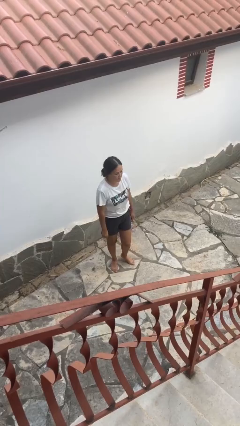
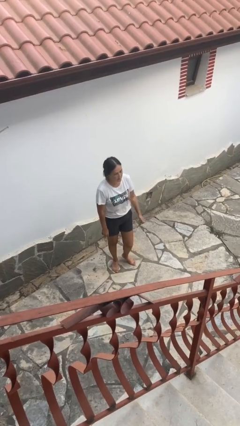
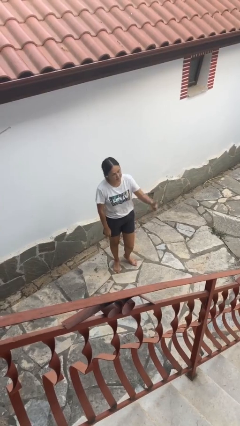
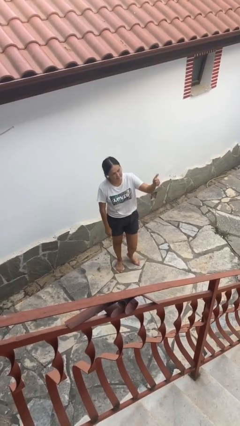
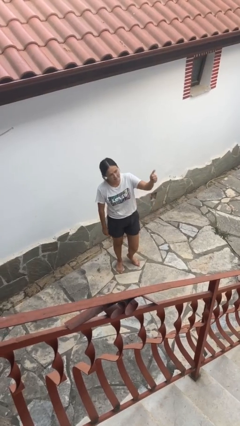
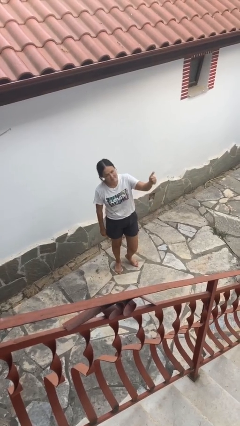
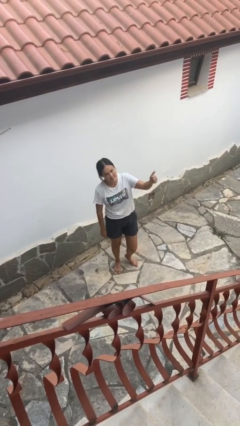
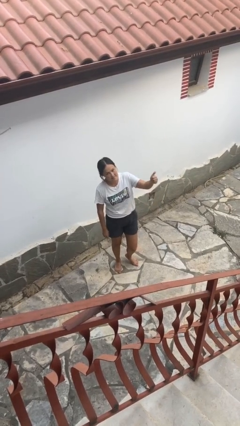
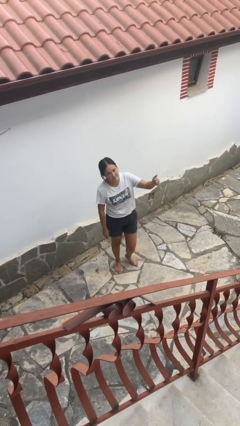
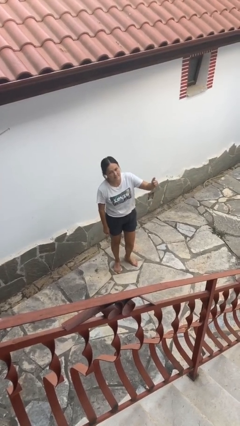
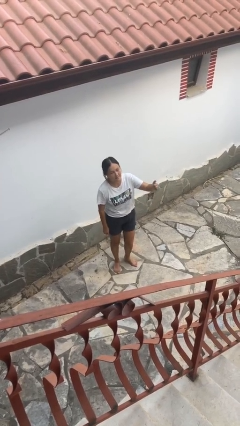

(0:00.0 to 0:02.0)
person gestures thumbs up

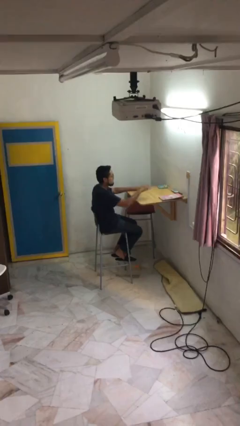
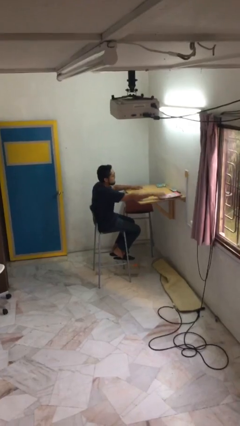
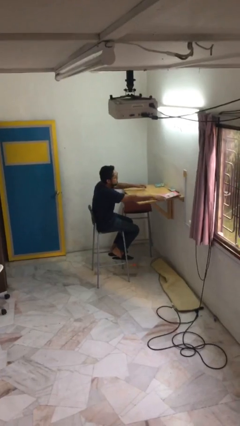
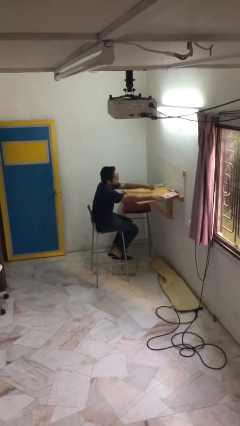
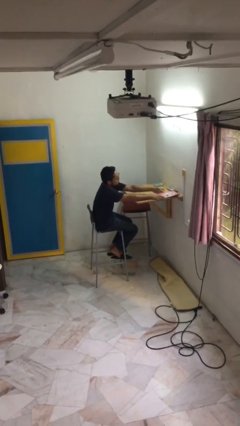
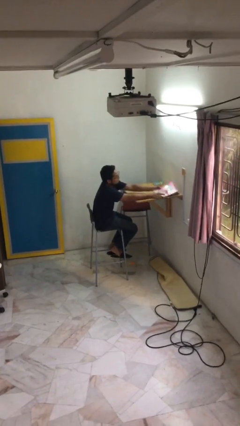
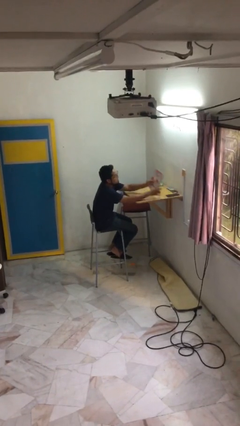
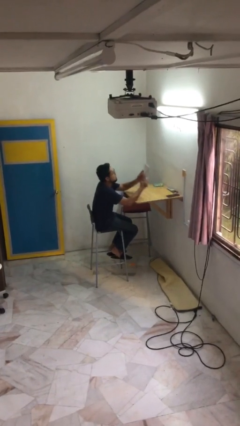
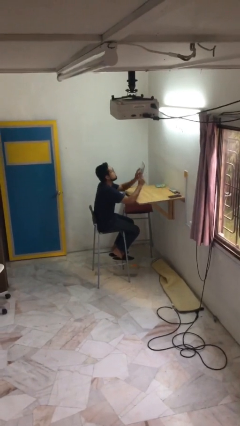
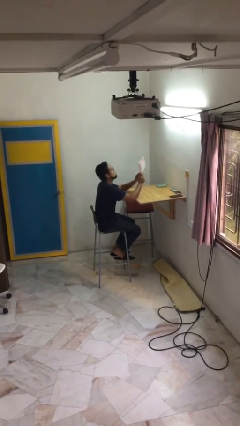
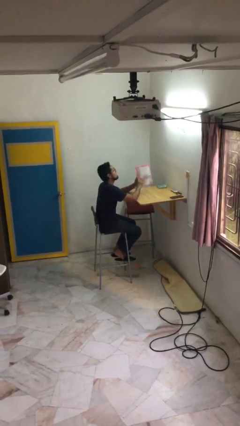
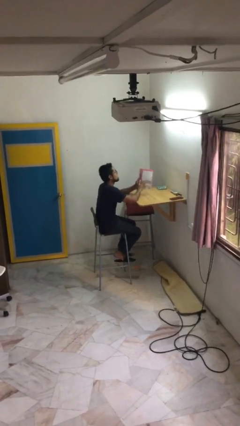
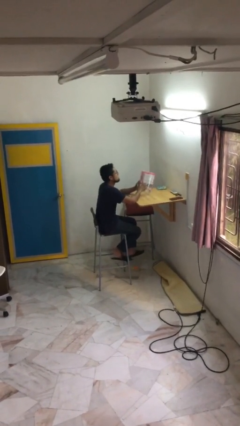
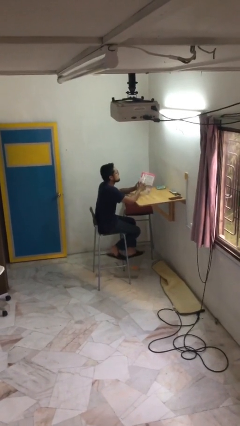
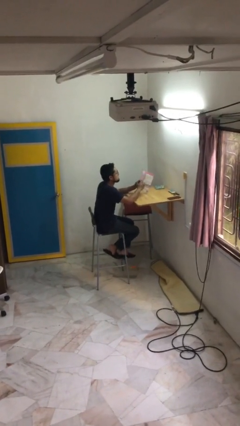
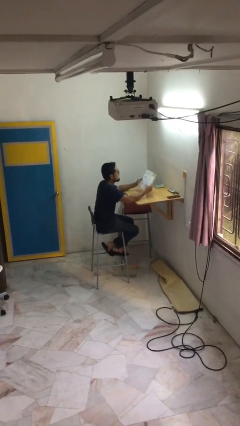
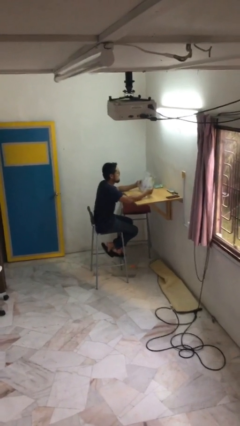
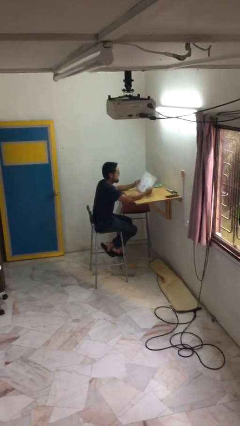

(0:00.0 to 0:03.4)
person picks up object from table

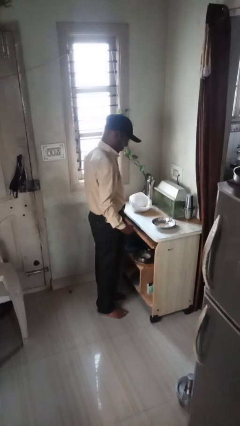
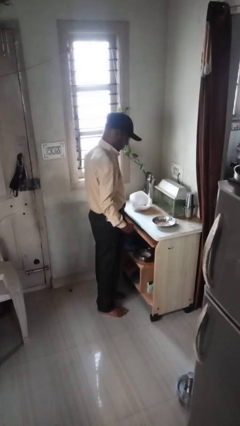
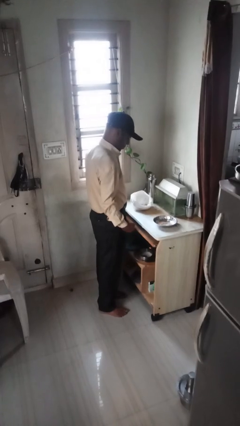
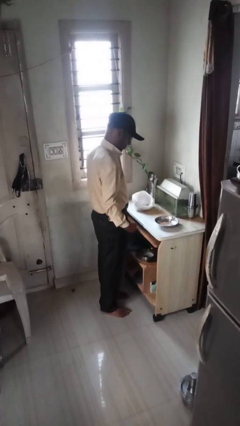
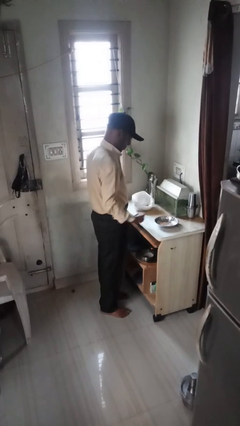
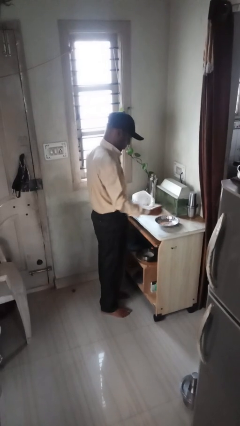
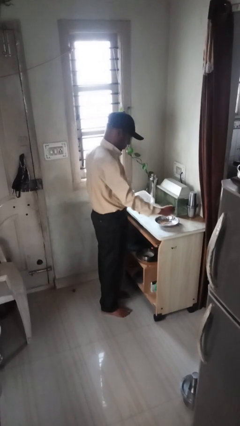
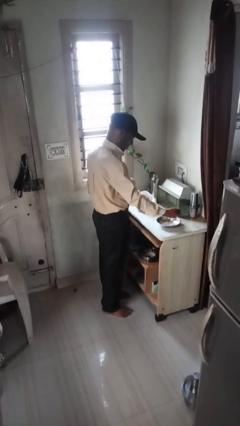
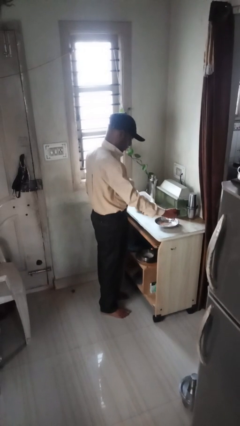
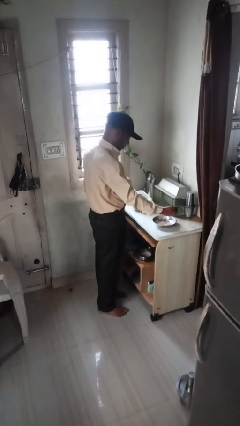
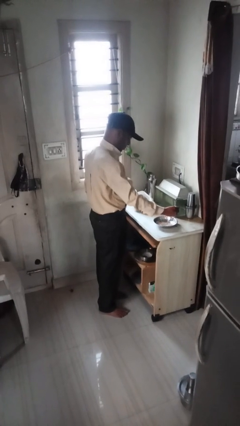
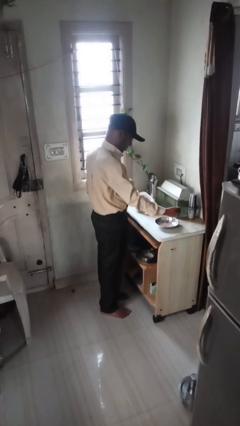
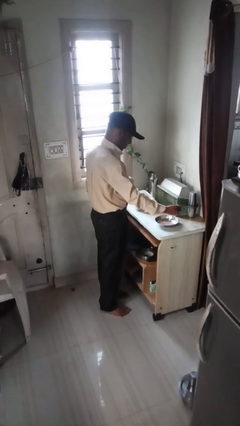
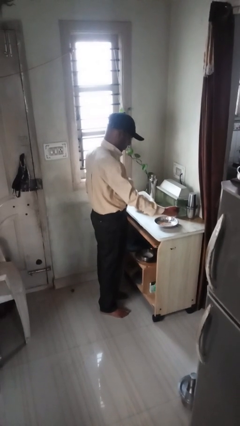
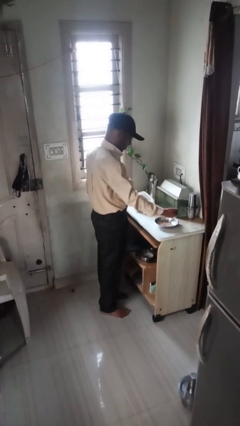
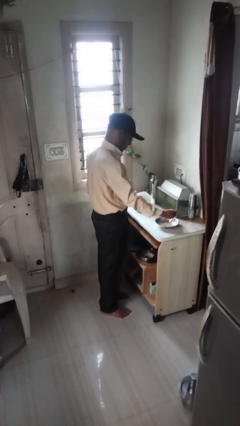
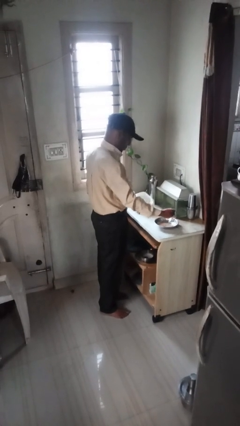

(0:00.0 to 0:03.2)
person pours into bowl

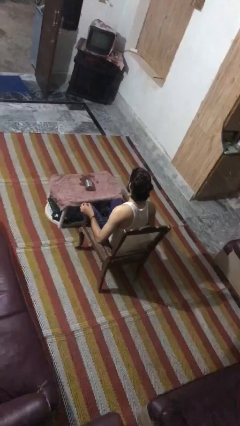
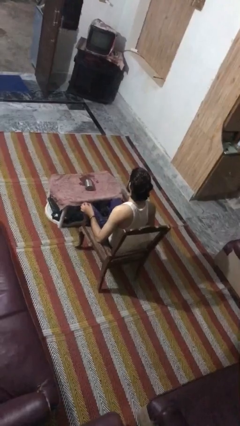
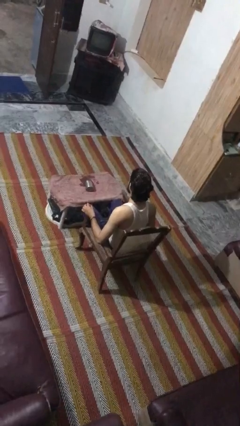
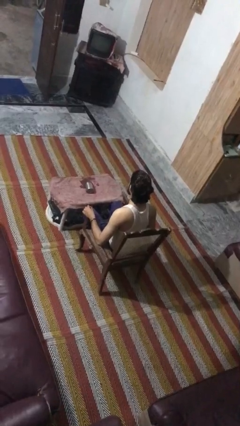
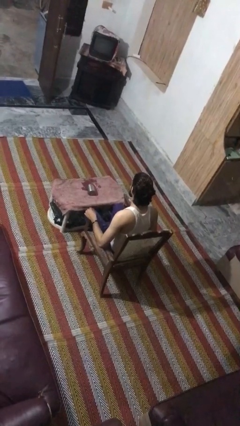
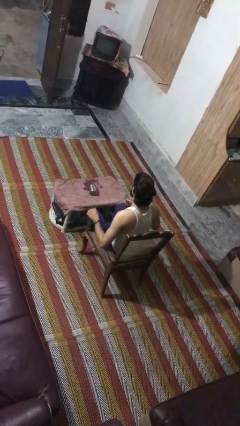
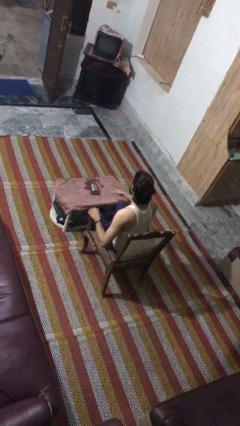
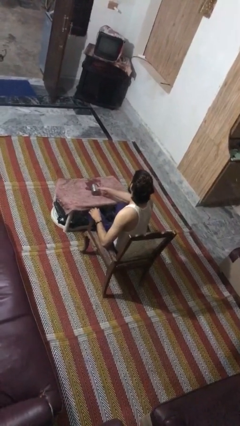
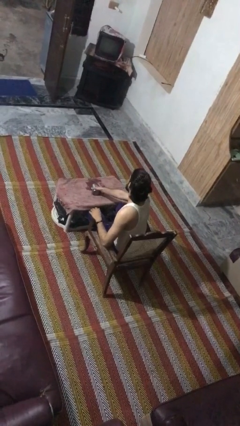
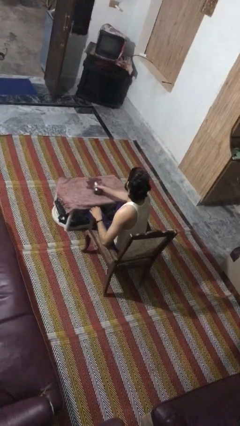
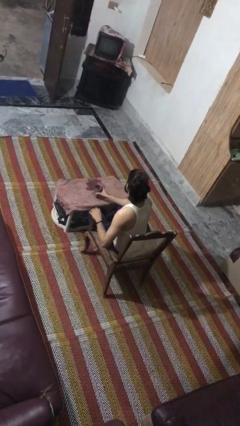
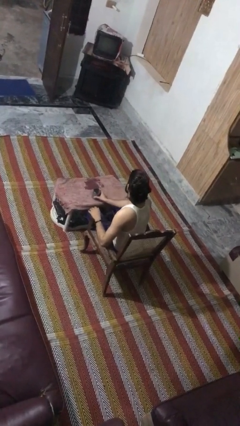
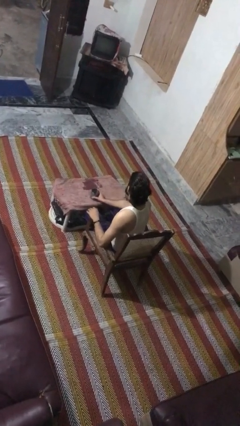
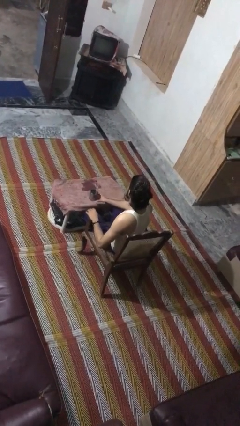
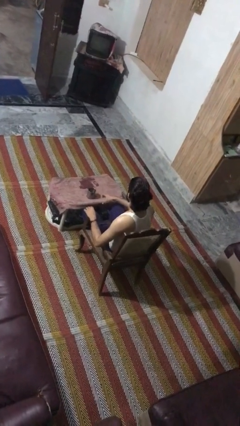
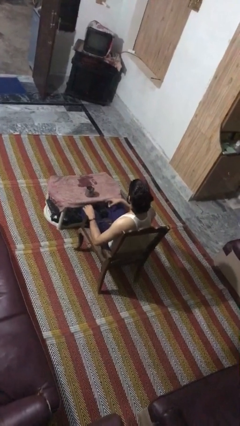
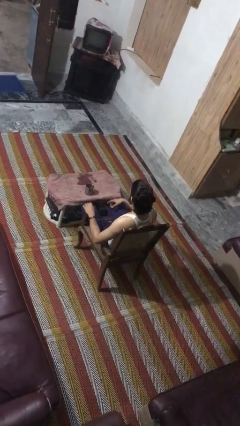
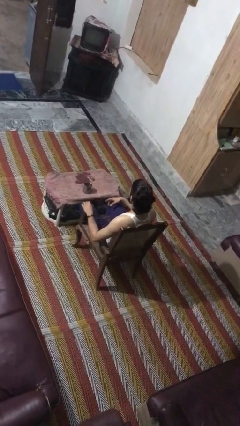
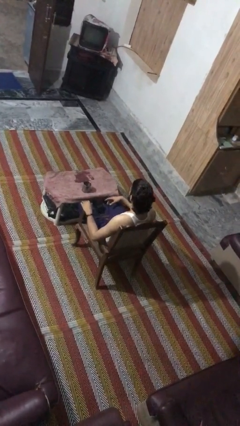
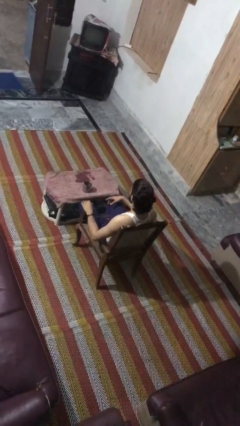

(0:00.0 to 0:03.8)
person sets upright glass

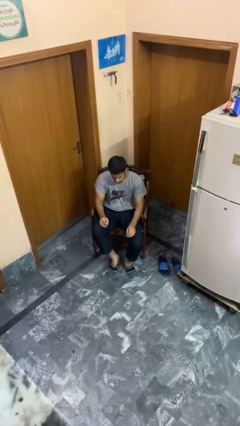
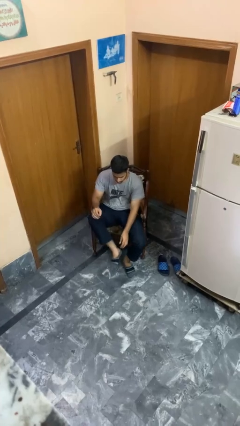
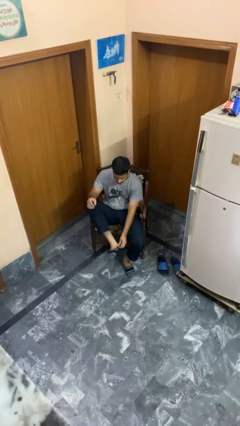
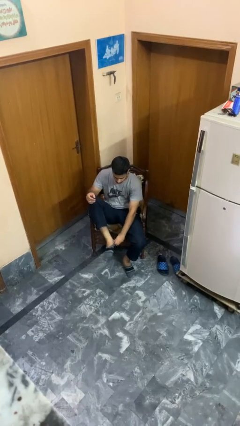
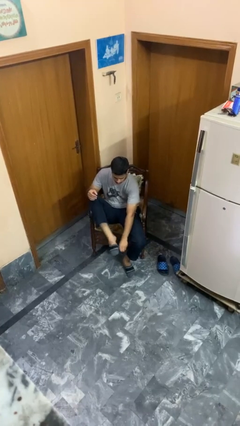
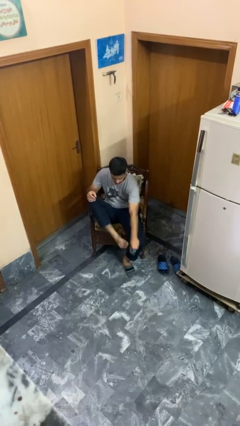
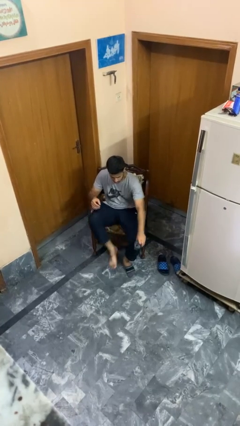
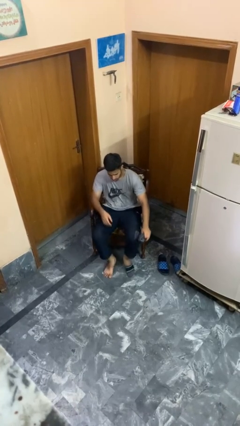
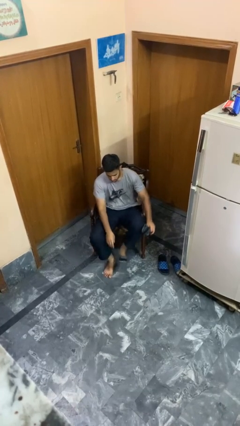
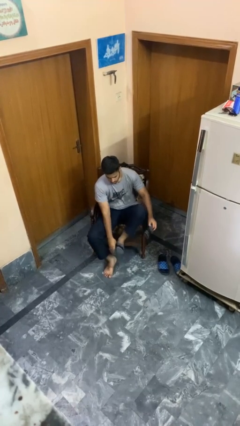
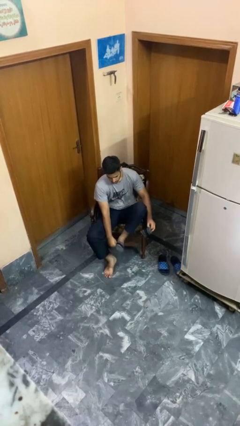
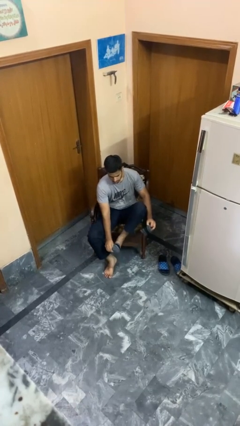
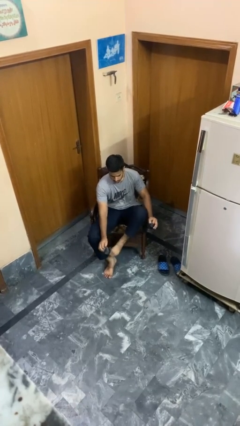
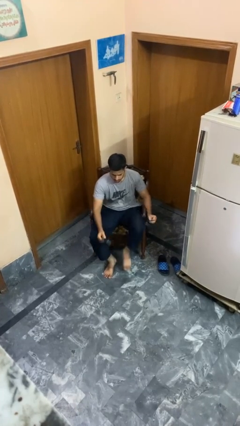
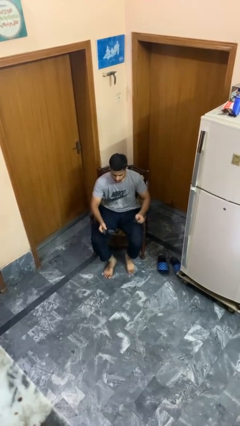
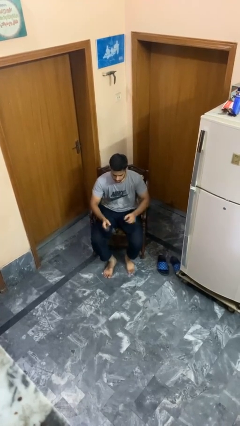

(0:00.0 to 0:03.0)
person takes off socks

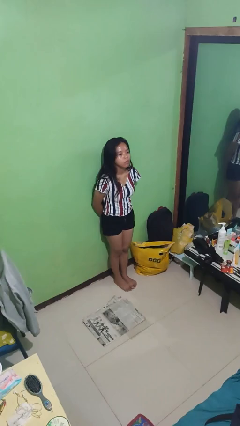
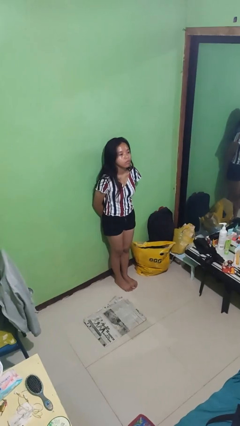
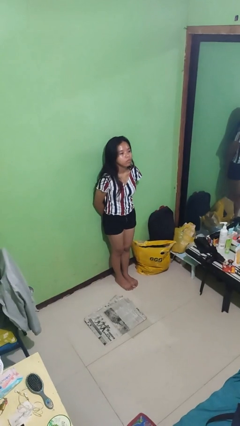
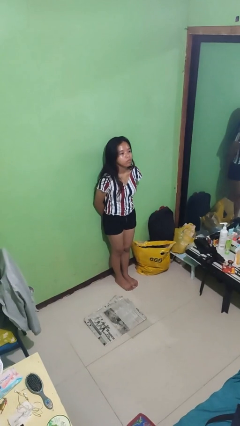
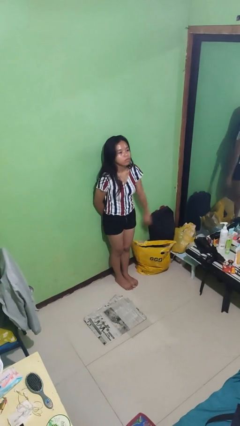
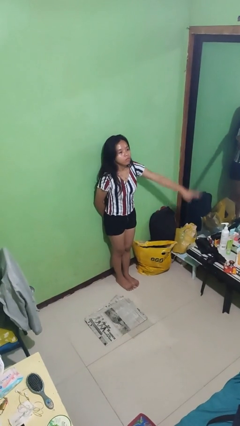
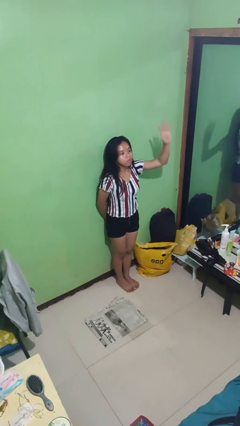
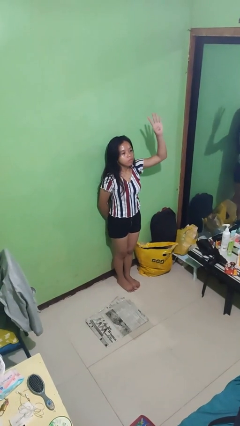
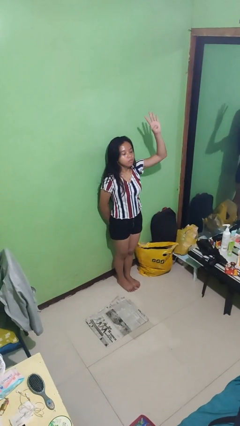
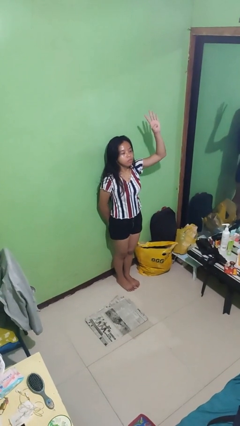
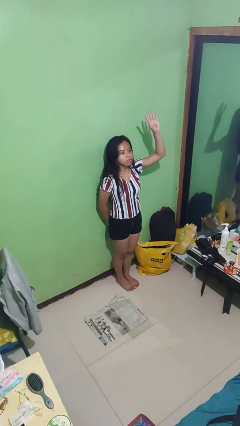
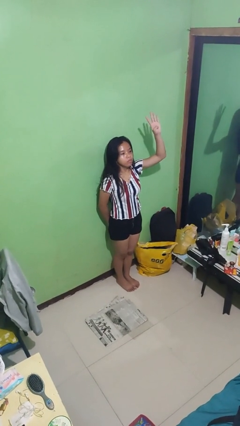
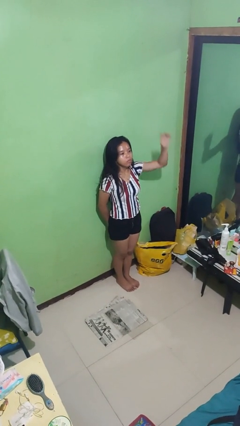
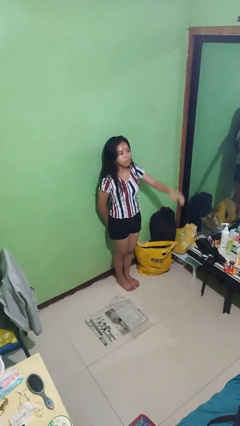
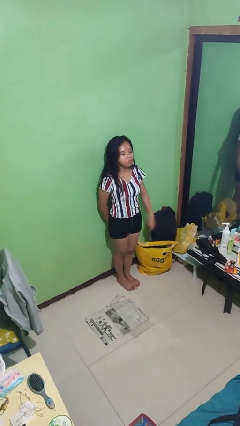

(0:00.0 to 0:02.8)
person gestures number four
